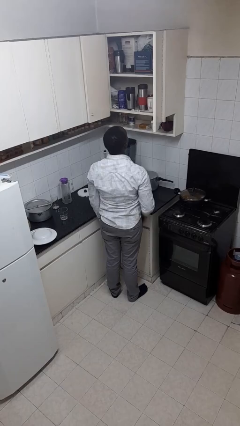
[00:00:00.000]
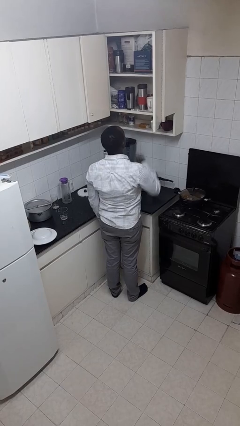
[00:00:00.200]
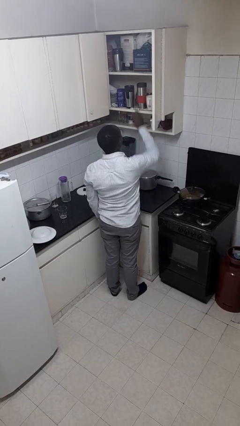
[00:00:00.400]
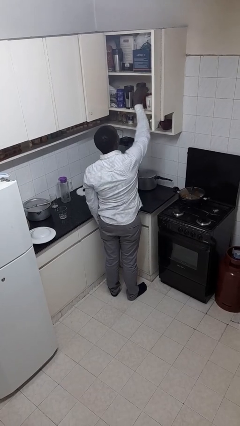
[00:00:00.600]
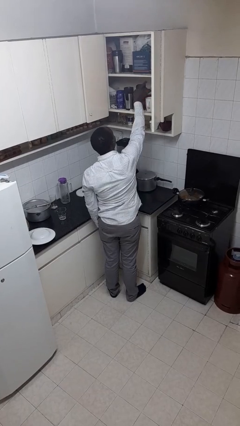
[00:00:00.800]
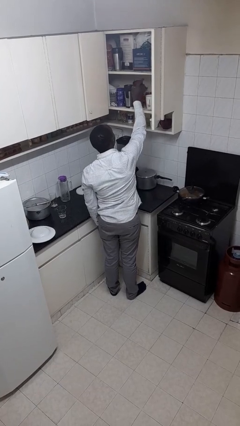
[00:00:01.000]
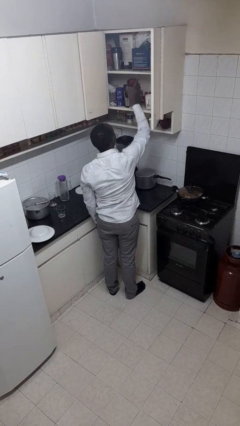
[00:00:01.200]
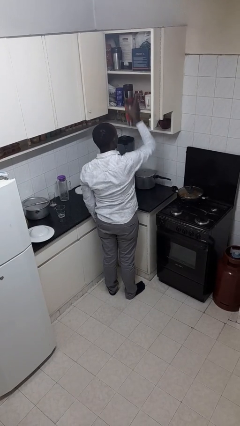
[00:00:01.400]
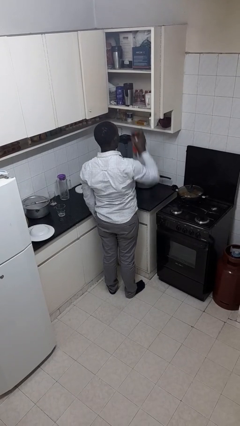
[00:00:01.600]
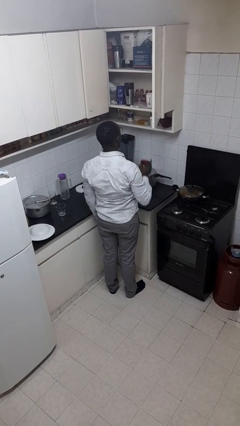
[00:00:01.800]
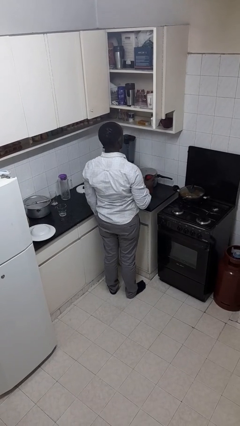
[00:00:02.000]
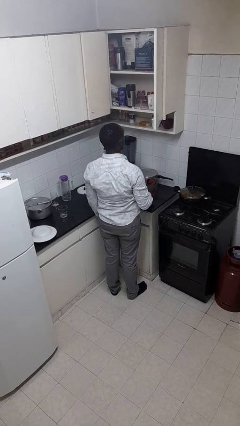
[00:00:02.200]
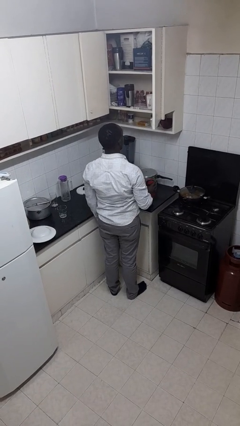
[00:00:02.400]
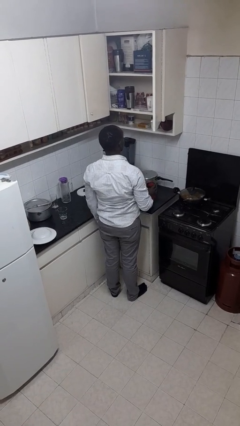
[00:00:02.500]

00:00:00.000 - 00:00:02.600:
person takes object from cabinet

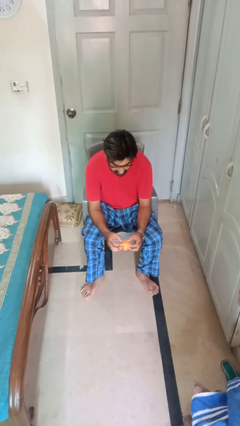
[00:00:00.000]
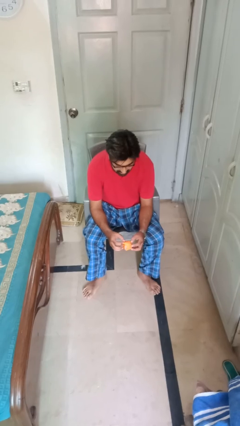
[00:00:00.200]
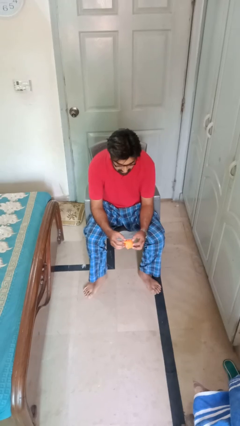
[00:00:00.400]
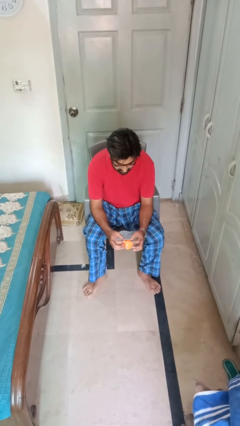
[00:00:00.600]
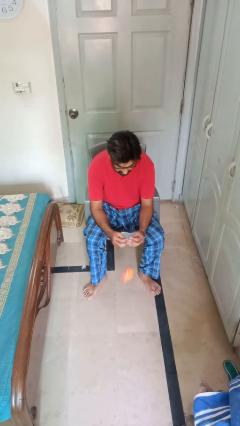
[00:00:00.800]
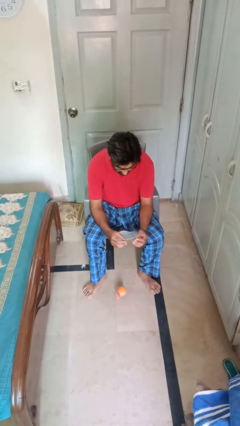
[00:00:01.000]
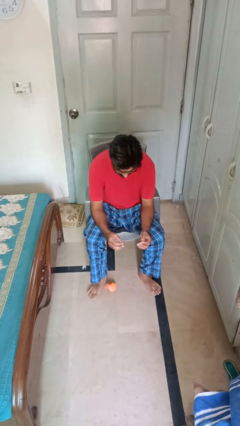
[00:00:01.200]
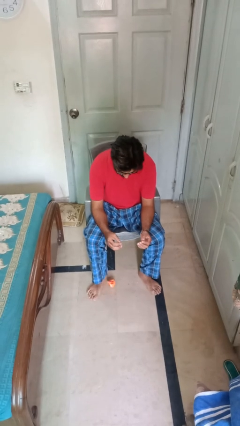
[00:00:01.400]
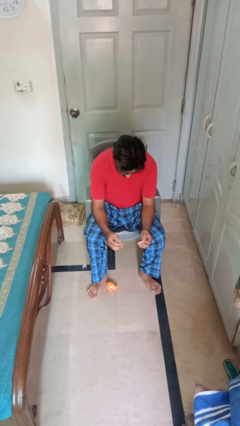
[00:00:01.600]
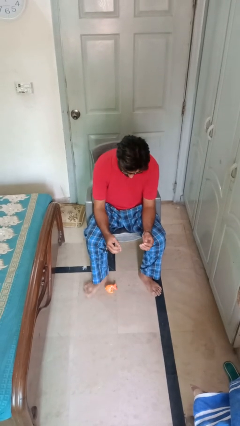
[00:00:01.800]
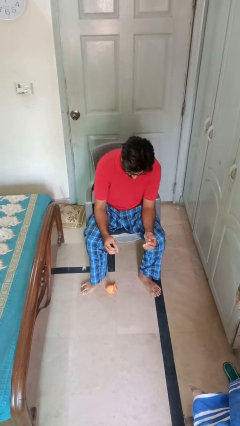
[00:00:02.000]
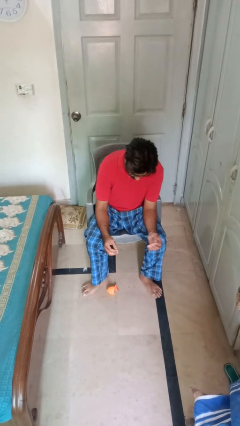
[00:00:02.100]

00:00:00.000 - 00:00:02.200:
person drops object

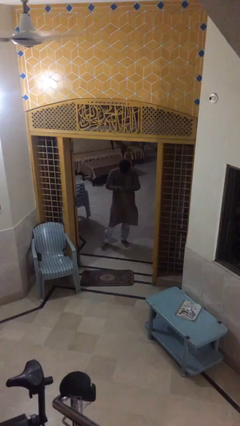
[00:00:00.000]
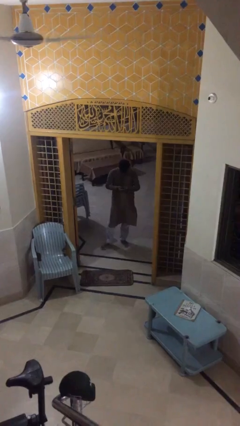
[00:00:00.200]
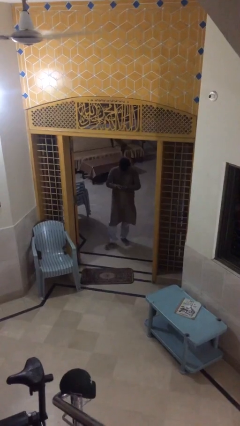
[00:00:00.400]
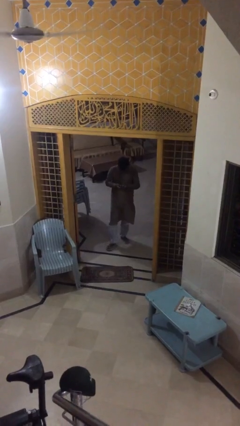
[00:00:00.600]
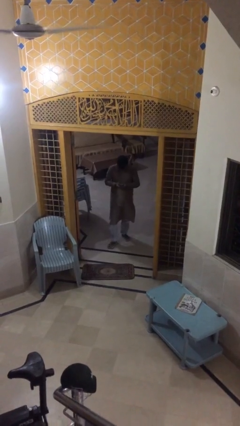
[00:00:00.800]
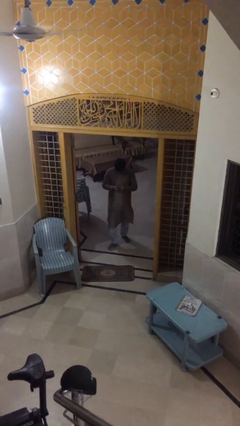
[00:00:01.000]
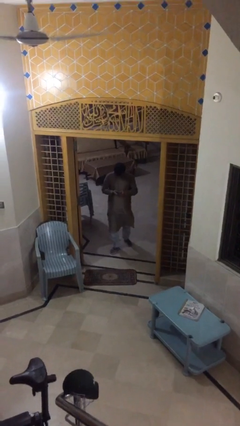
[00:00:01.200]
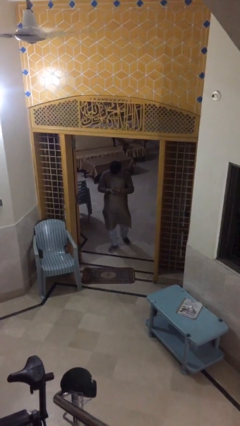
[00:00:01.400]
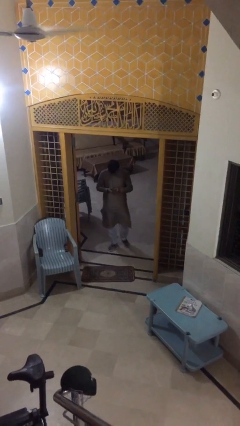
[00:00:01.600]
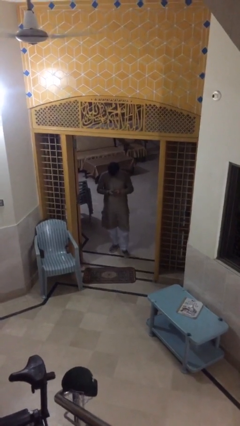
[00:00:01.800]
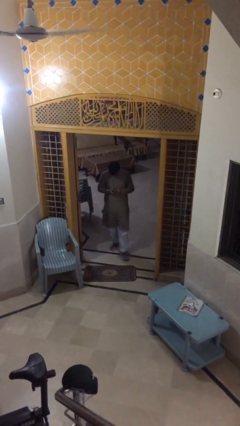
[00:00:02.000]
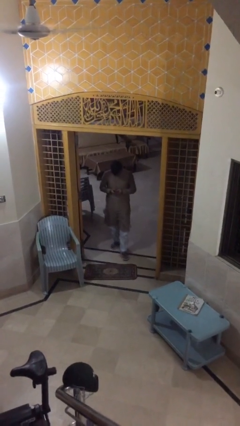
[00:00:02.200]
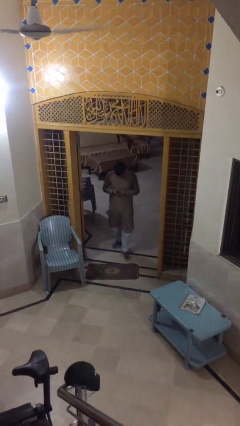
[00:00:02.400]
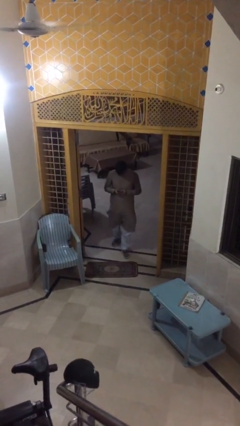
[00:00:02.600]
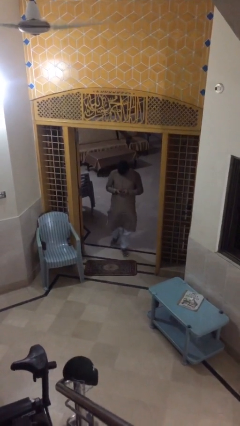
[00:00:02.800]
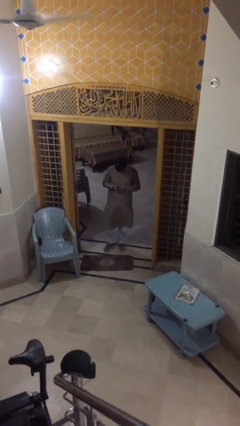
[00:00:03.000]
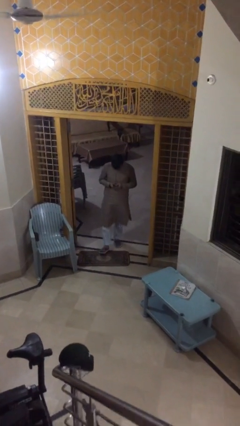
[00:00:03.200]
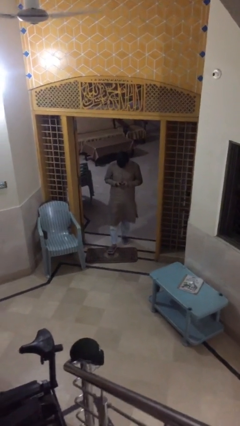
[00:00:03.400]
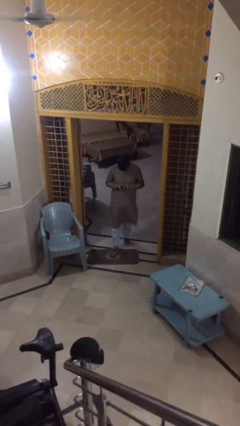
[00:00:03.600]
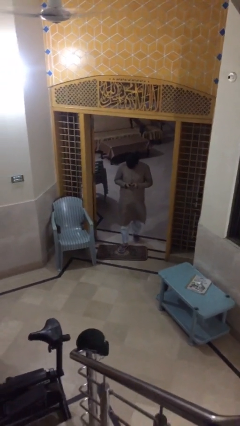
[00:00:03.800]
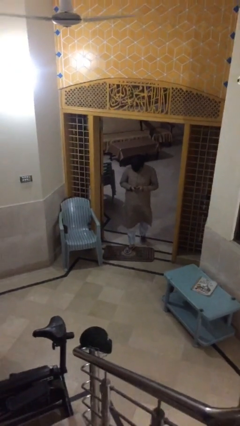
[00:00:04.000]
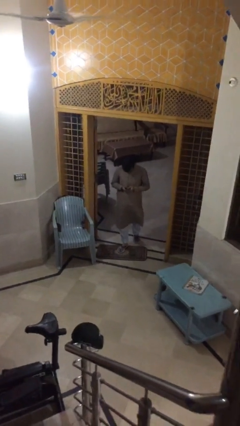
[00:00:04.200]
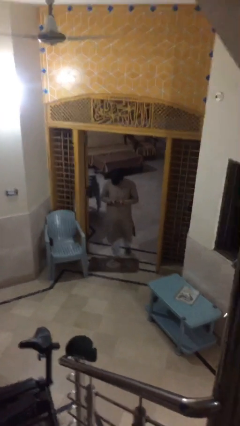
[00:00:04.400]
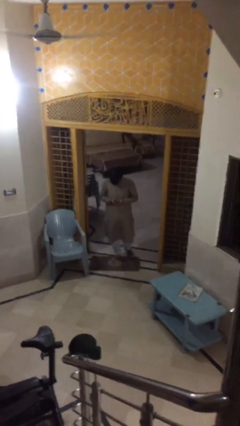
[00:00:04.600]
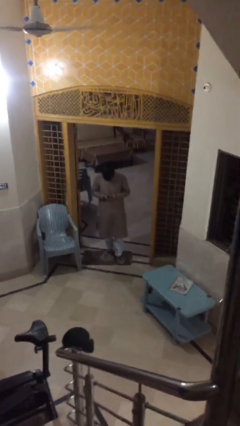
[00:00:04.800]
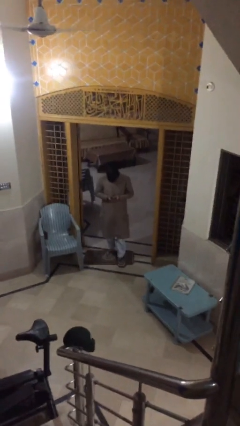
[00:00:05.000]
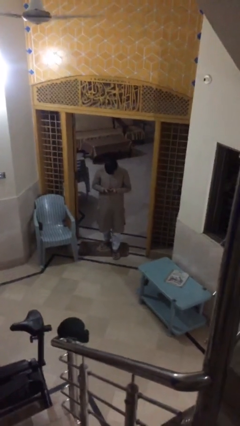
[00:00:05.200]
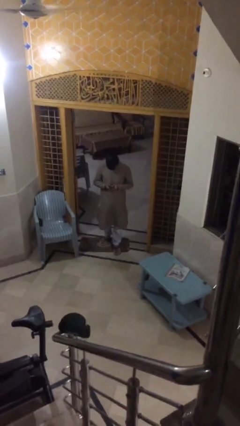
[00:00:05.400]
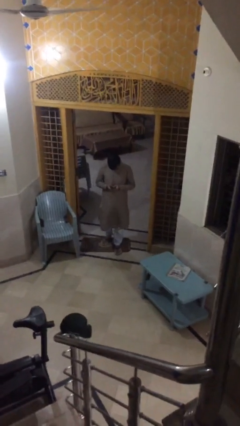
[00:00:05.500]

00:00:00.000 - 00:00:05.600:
person texts on phone

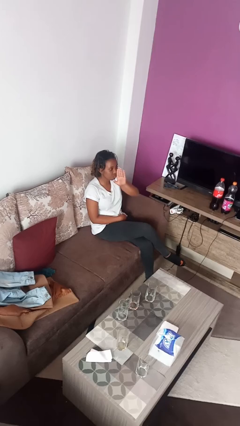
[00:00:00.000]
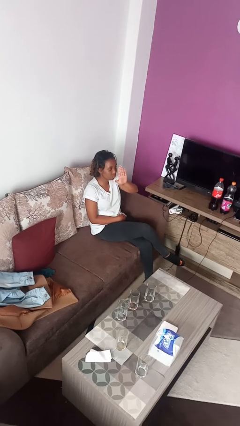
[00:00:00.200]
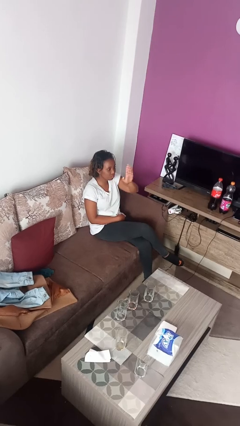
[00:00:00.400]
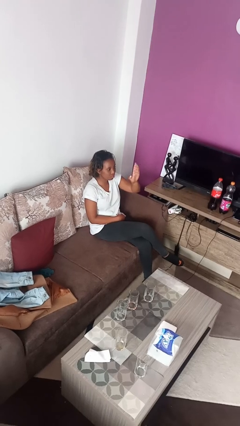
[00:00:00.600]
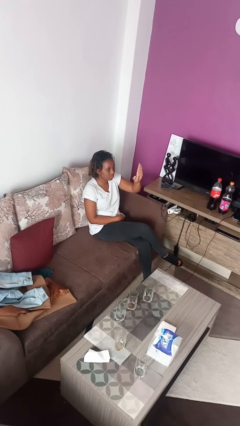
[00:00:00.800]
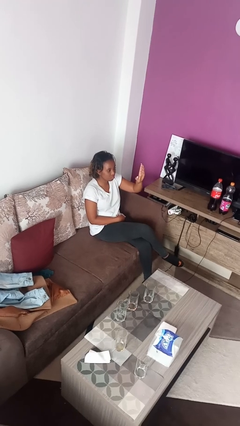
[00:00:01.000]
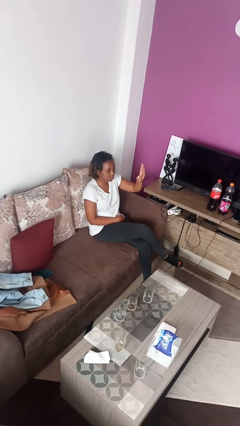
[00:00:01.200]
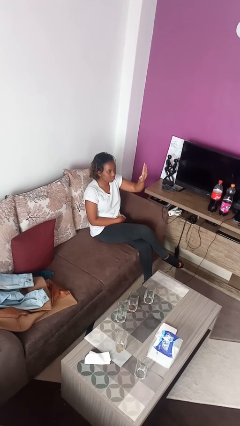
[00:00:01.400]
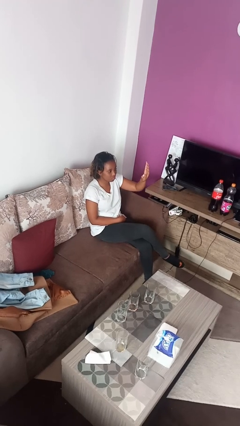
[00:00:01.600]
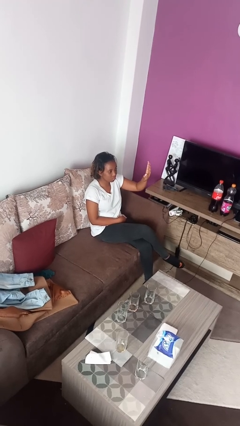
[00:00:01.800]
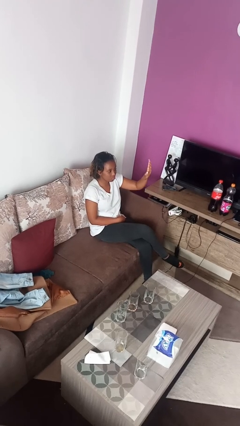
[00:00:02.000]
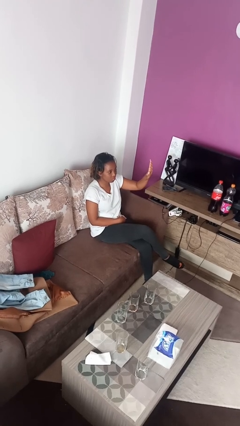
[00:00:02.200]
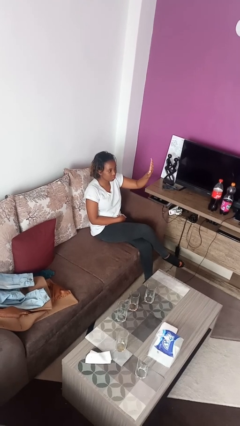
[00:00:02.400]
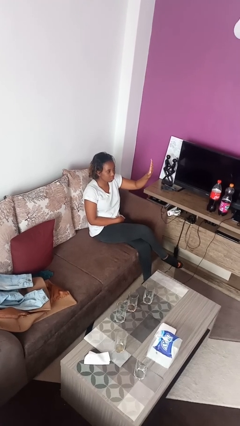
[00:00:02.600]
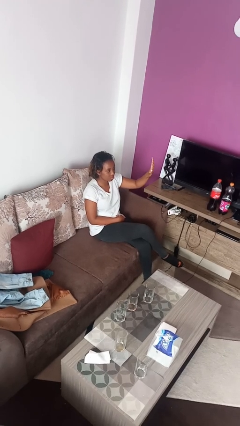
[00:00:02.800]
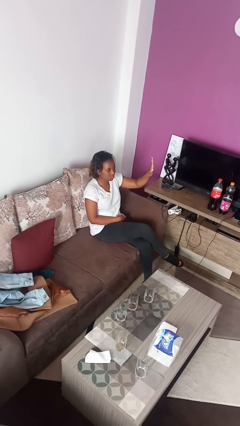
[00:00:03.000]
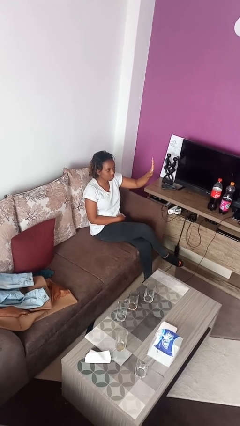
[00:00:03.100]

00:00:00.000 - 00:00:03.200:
person gestures swipe left

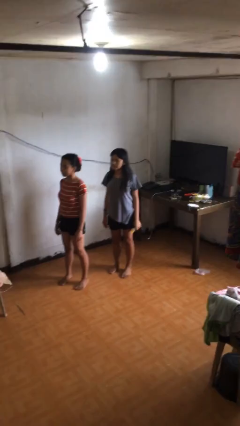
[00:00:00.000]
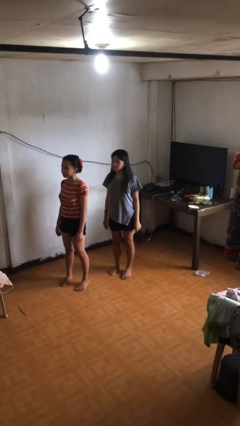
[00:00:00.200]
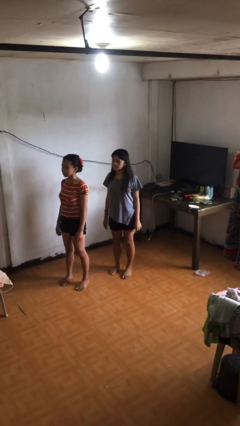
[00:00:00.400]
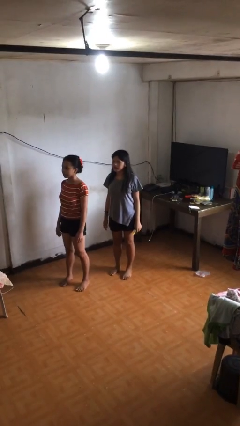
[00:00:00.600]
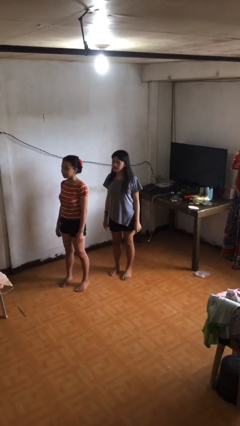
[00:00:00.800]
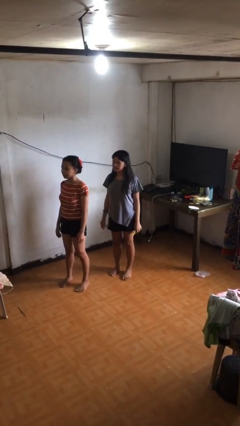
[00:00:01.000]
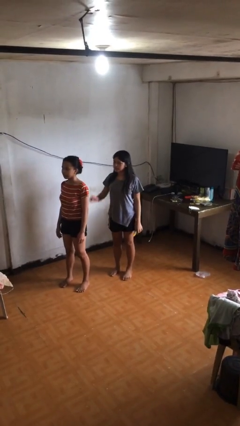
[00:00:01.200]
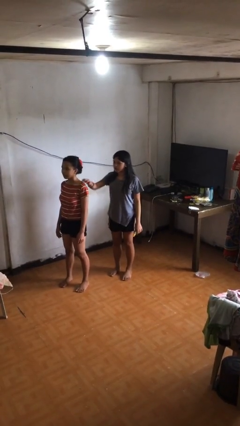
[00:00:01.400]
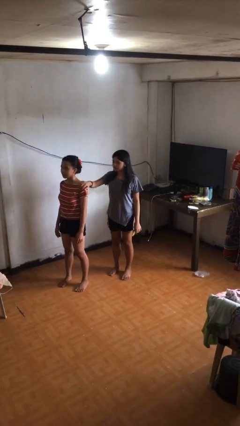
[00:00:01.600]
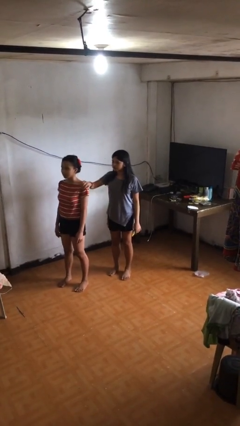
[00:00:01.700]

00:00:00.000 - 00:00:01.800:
person grabs person by shoulder

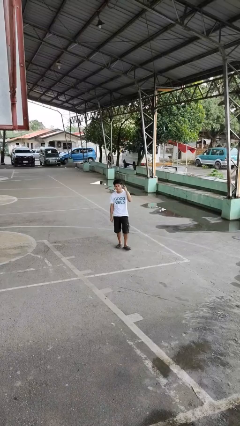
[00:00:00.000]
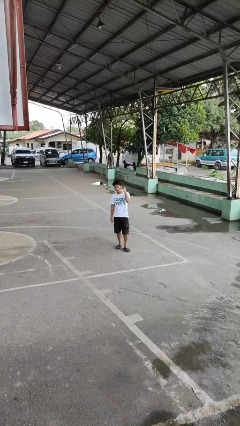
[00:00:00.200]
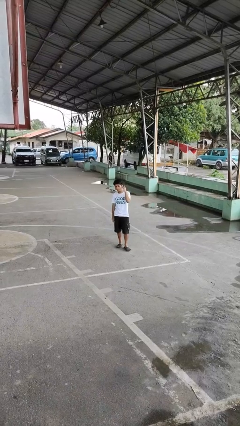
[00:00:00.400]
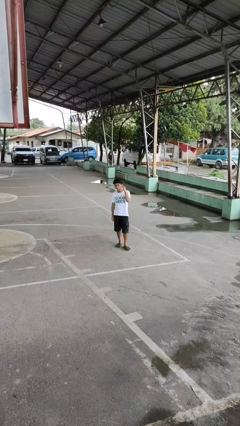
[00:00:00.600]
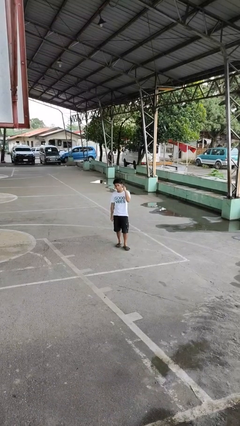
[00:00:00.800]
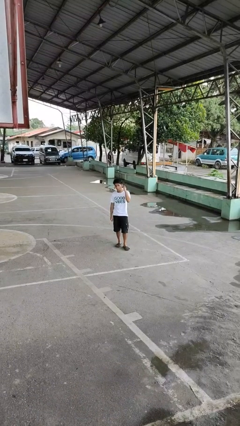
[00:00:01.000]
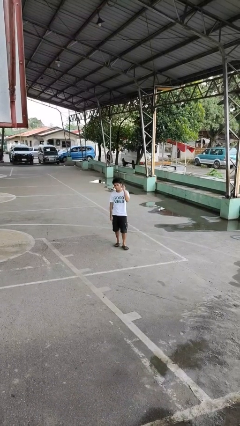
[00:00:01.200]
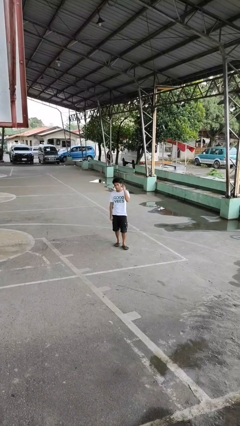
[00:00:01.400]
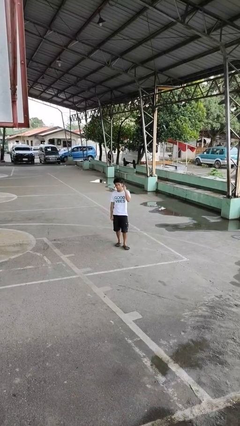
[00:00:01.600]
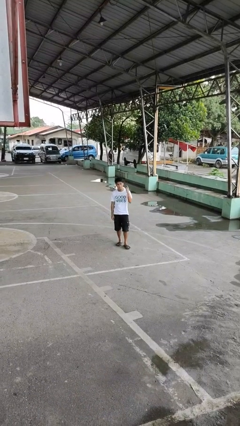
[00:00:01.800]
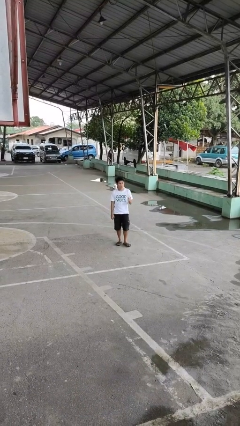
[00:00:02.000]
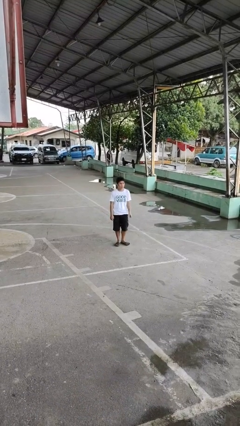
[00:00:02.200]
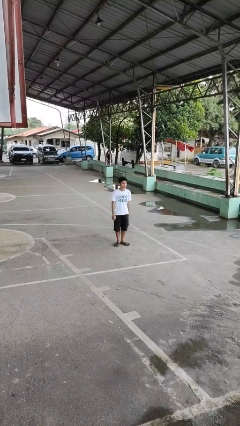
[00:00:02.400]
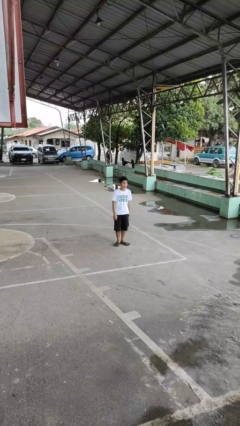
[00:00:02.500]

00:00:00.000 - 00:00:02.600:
person gestures listen closely
